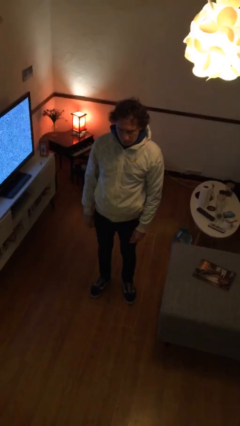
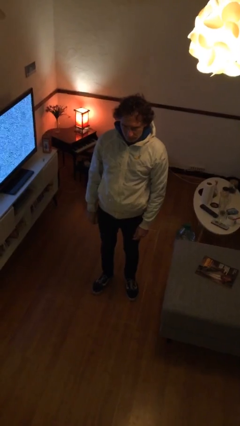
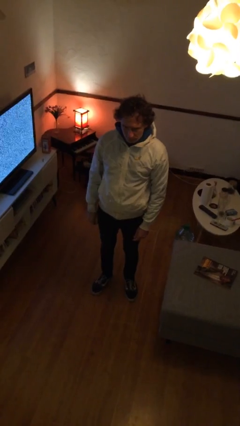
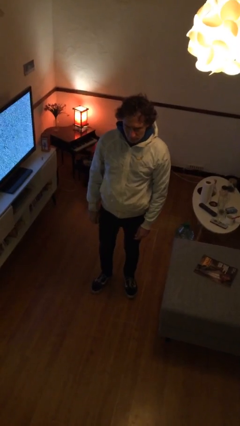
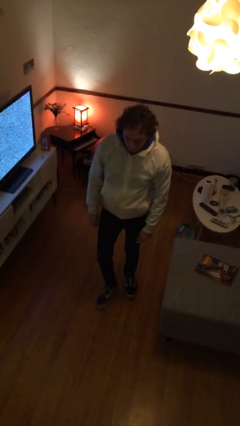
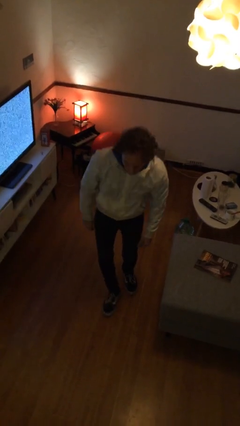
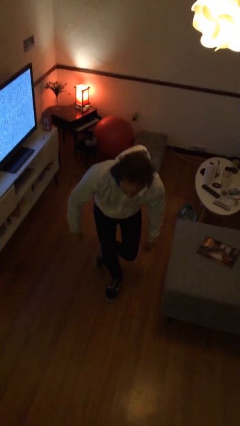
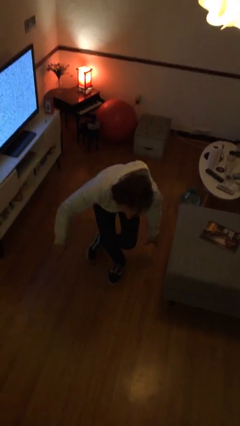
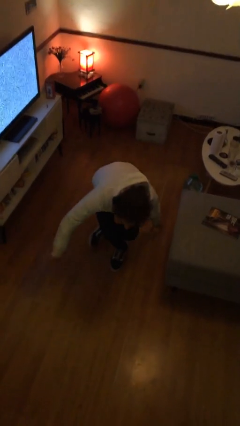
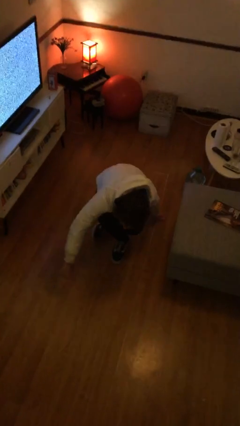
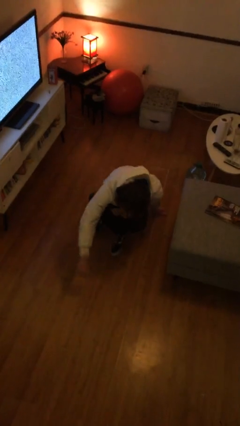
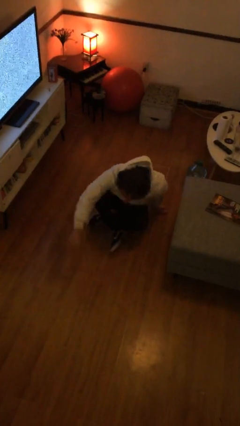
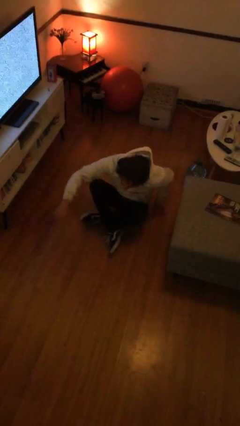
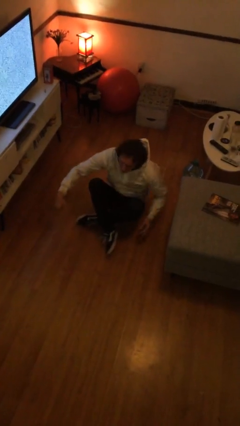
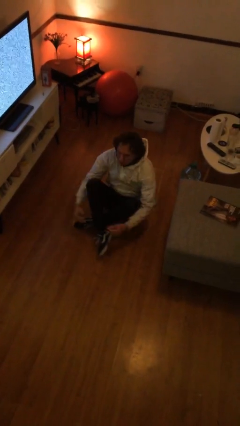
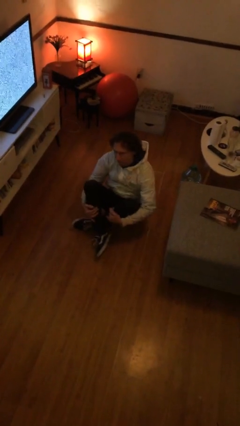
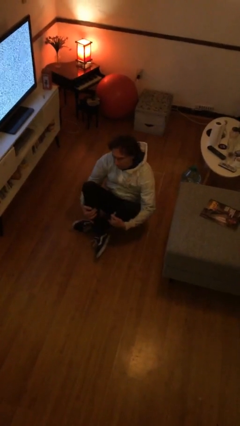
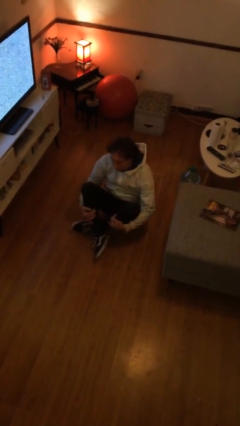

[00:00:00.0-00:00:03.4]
person sits crisscross

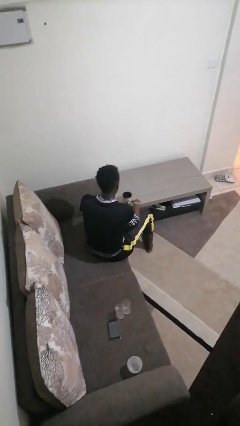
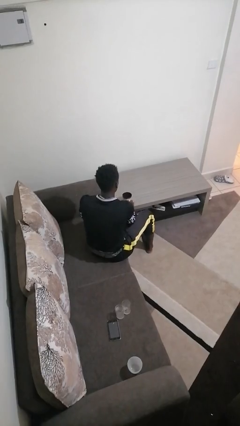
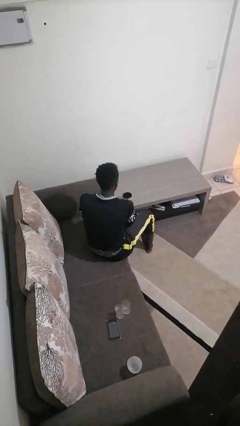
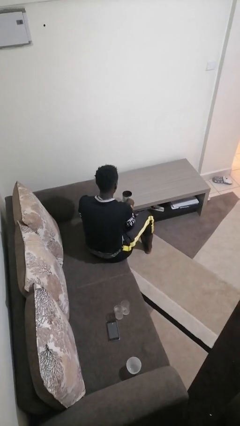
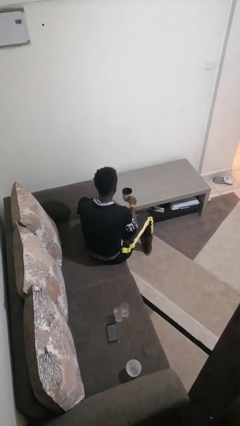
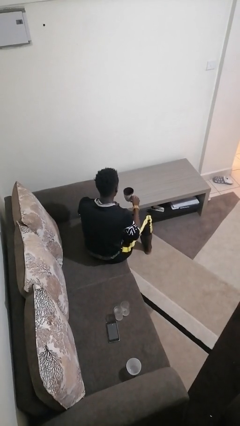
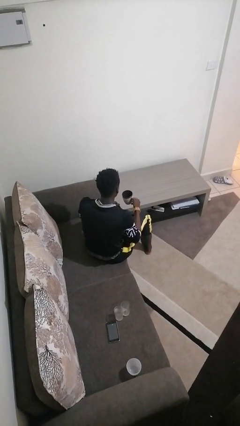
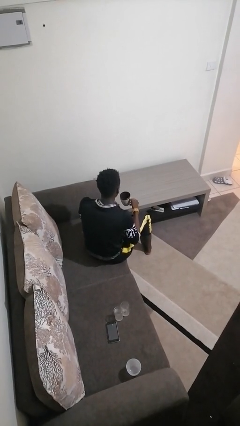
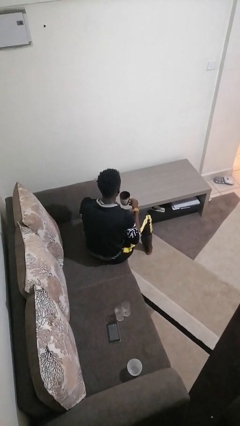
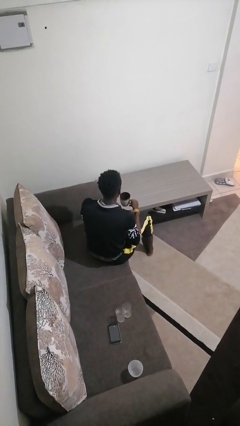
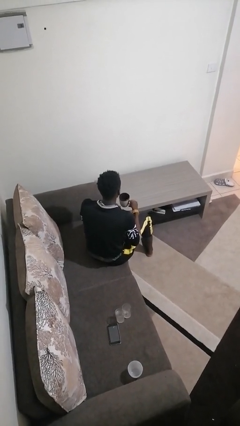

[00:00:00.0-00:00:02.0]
person picks up object from table

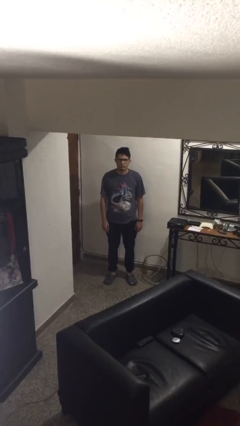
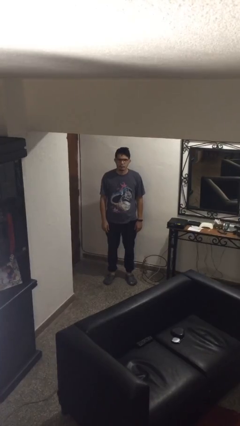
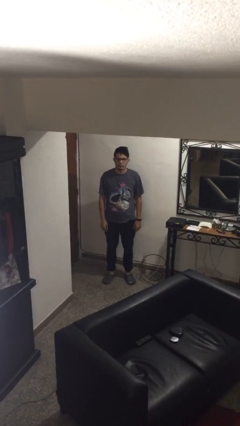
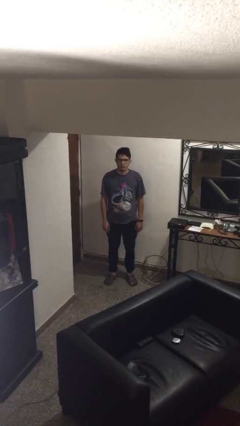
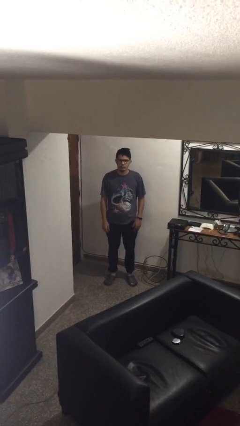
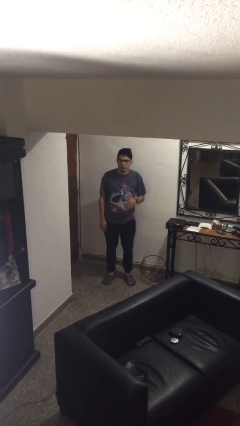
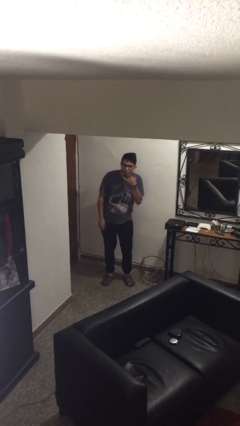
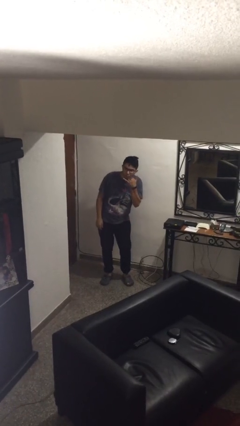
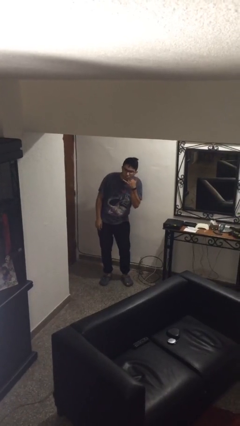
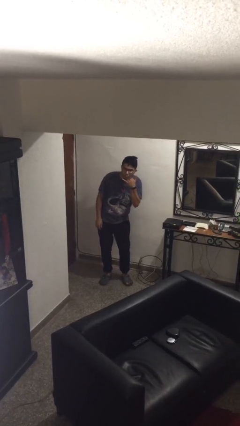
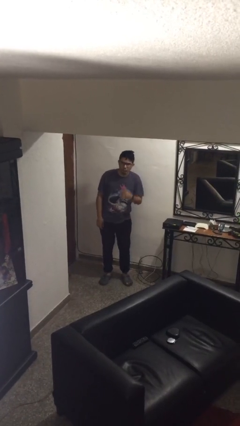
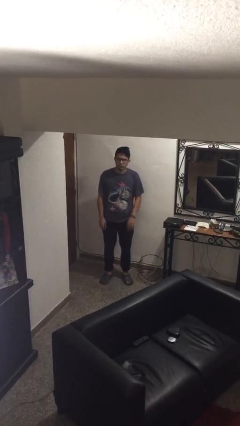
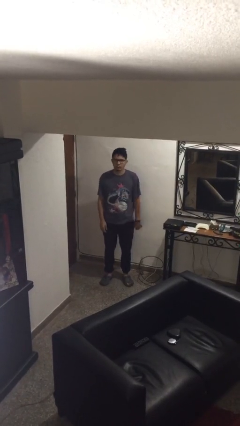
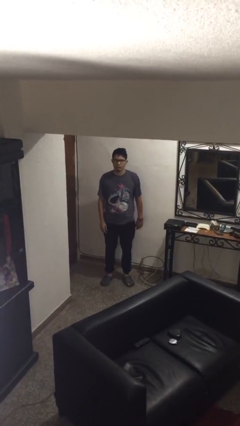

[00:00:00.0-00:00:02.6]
person gestures call me

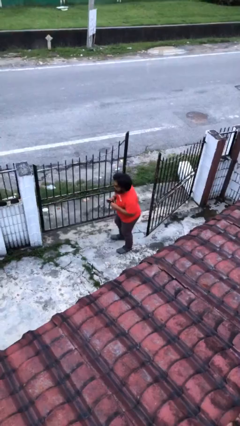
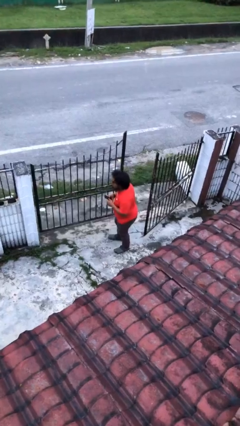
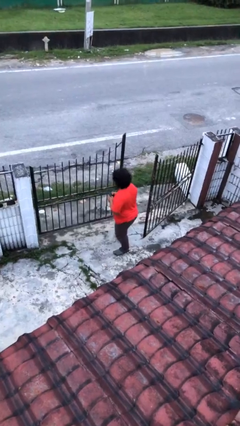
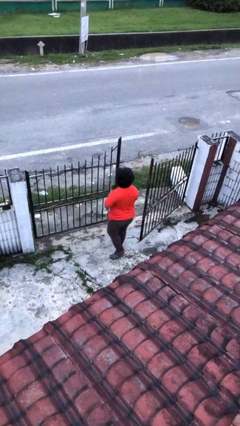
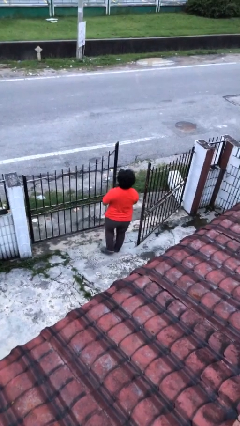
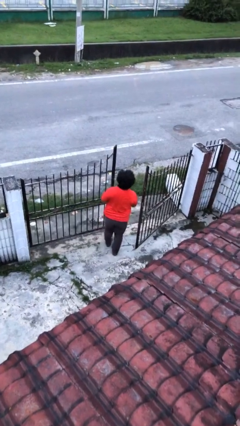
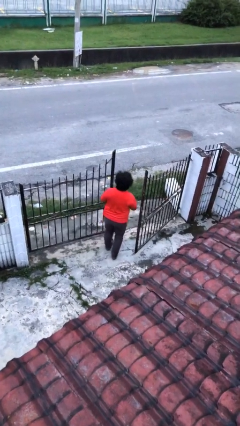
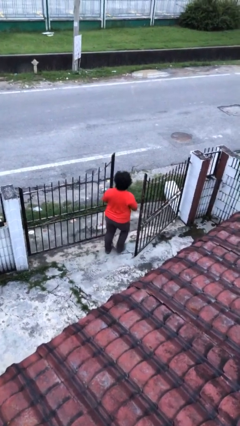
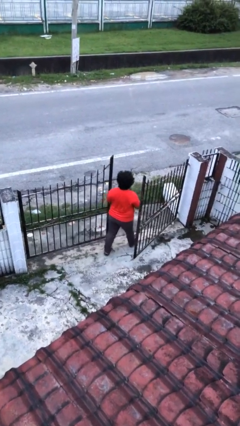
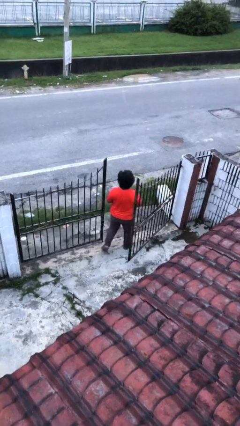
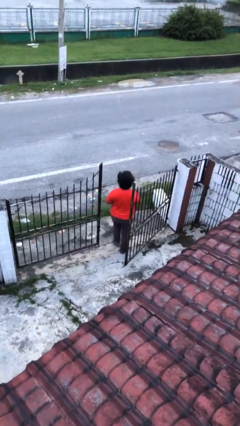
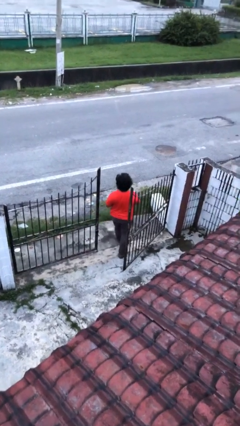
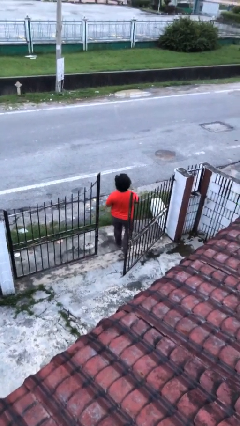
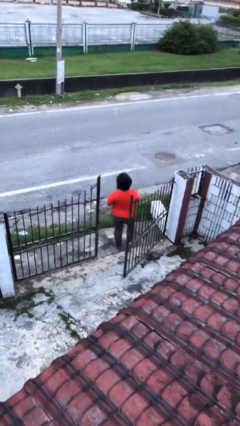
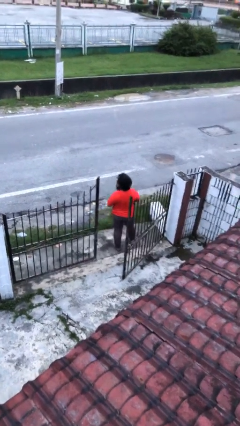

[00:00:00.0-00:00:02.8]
person exits scene through structure

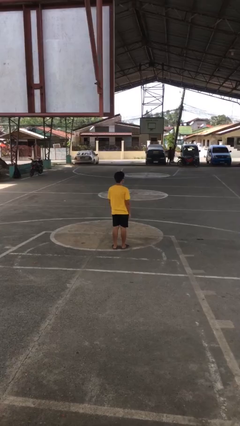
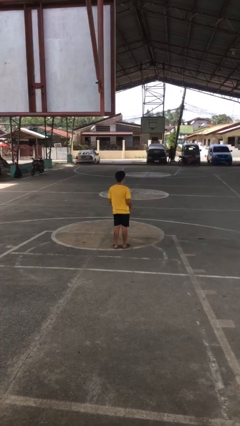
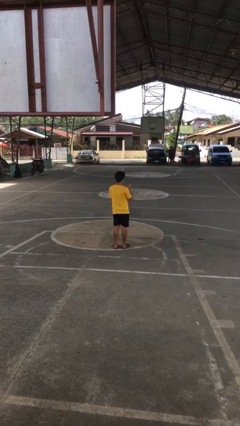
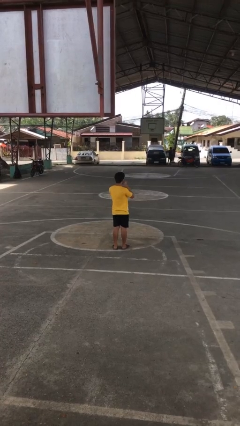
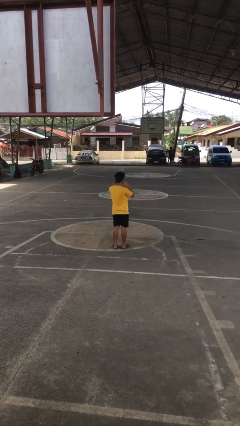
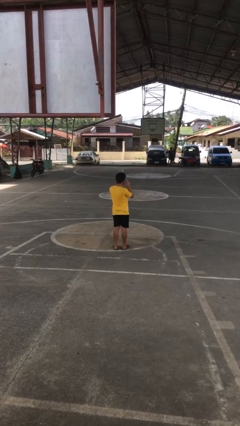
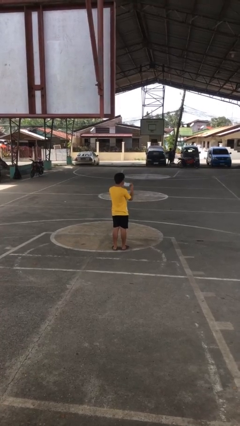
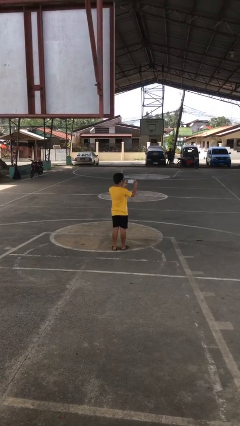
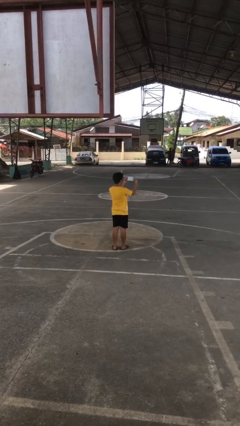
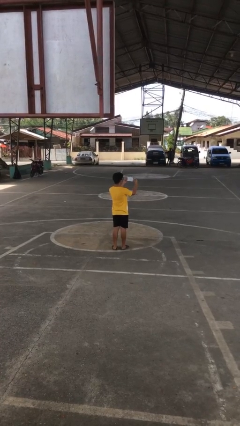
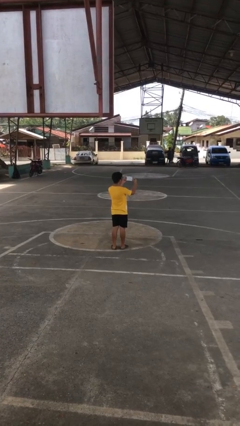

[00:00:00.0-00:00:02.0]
person takes off facemask

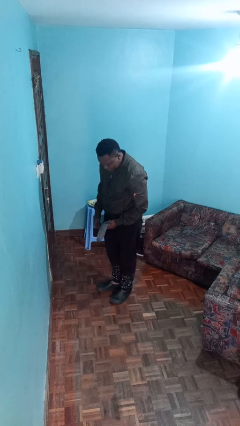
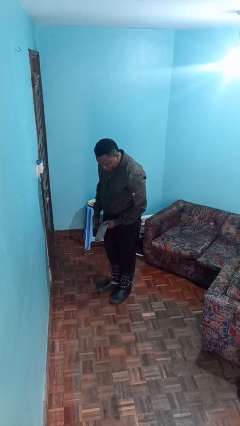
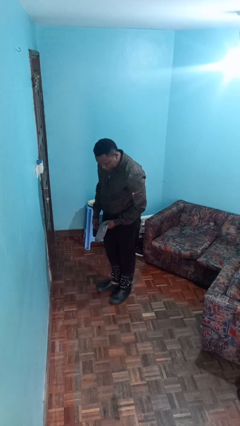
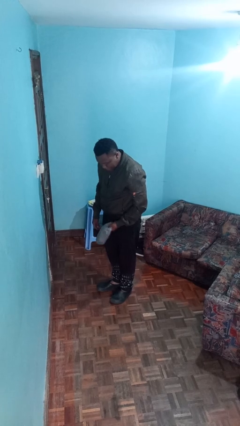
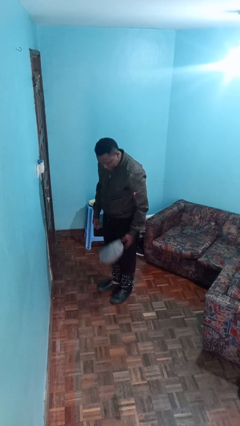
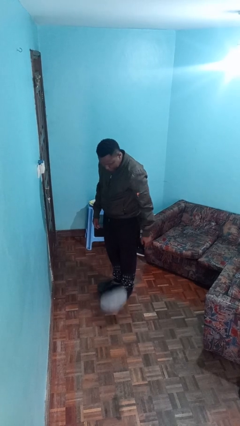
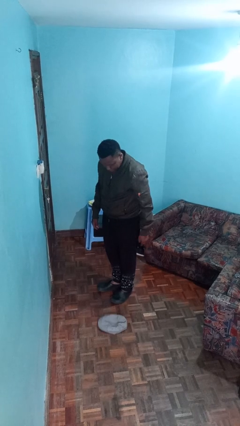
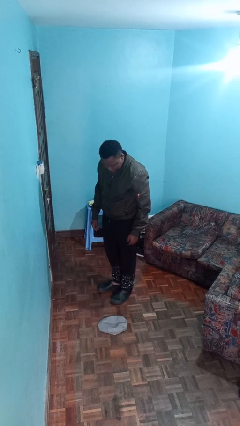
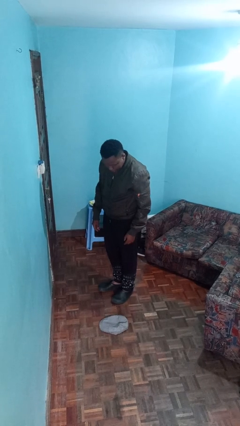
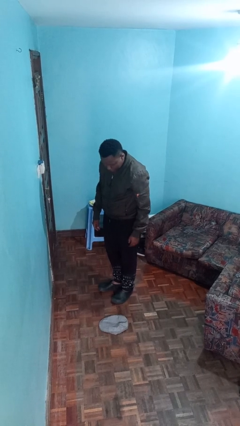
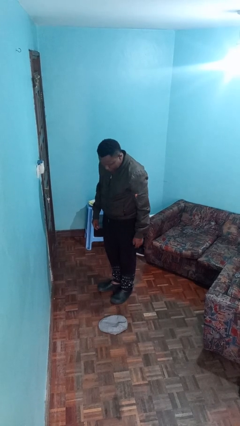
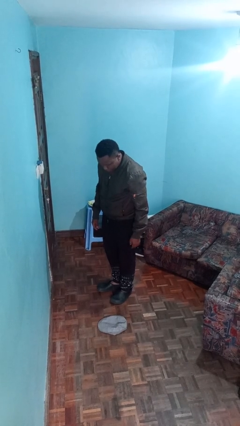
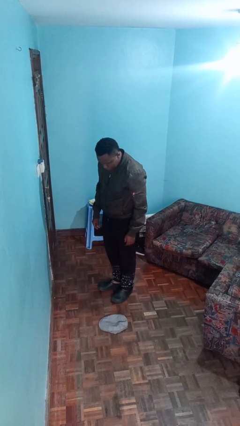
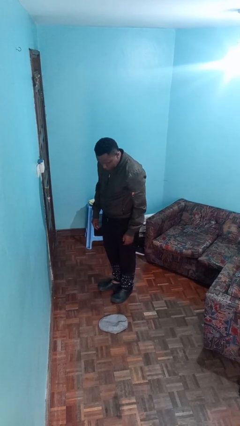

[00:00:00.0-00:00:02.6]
person drops object

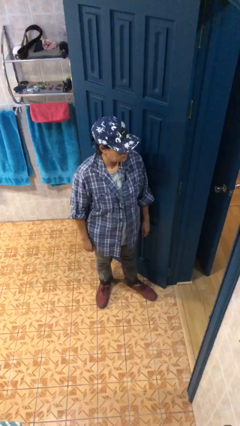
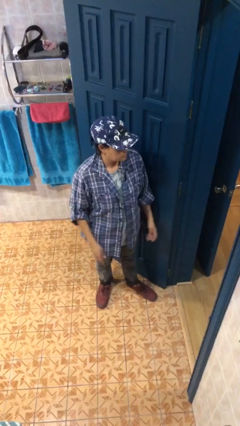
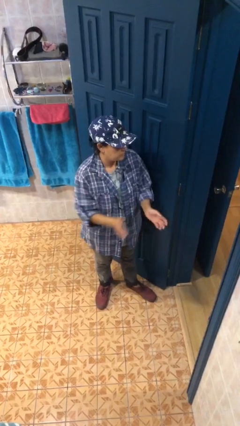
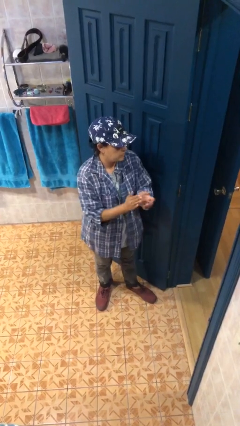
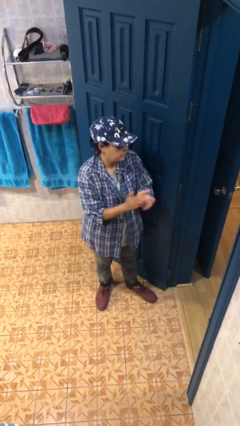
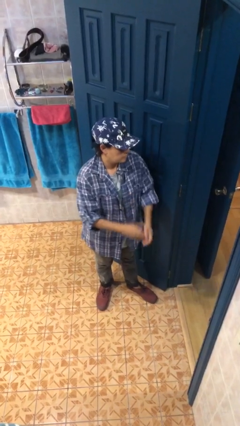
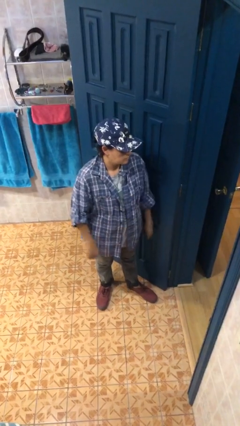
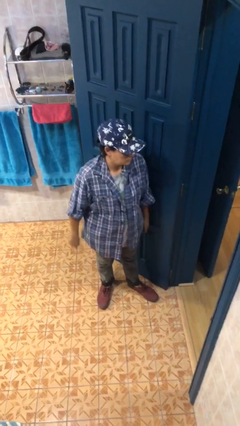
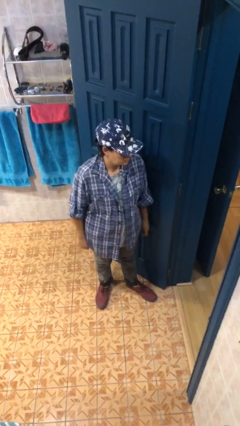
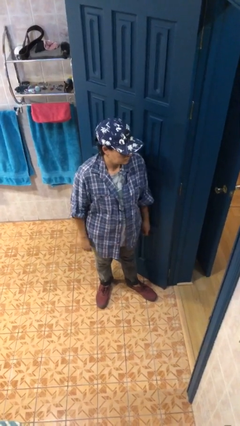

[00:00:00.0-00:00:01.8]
person claps hands
